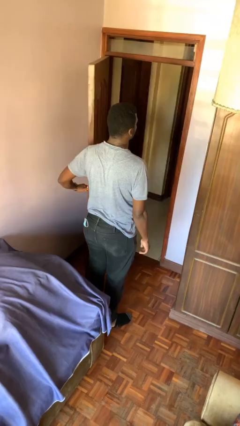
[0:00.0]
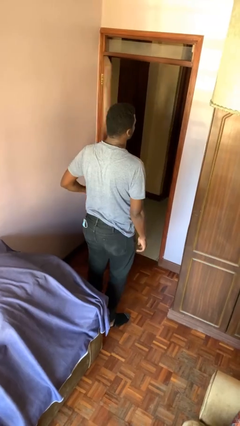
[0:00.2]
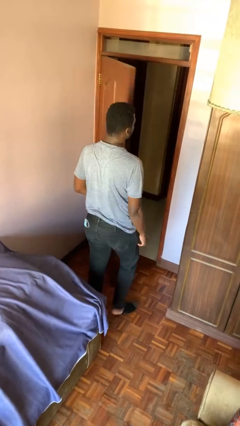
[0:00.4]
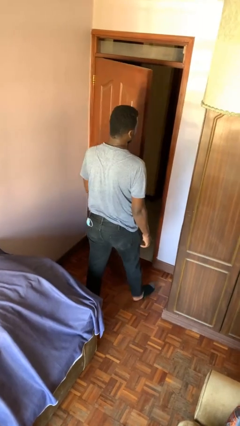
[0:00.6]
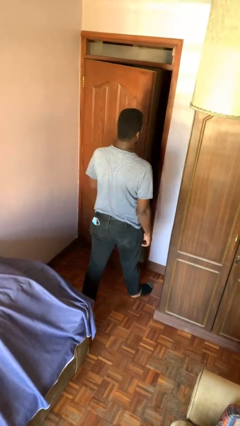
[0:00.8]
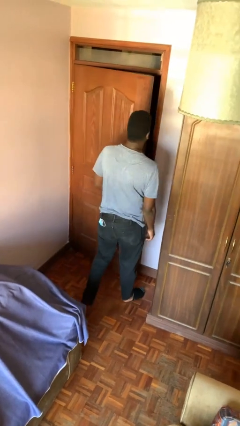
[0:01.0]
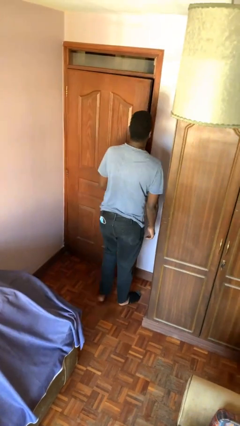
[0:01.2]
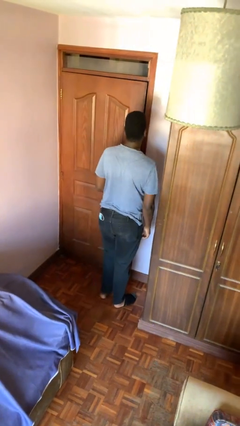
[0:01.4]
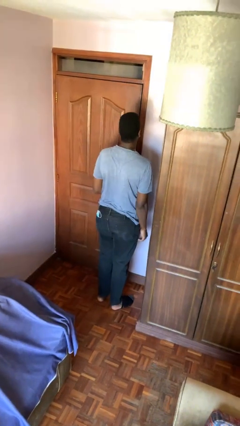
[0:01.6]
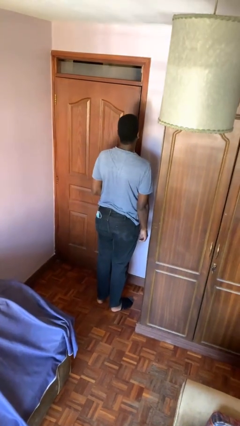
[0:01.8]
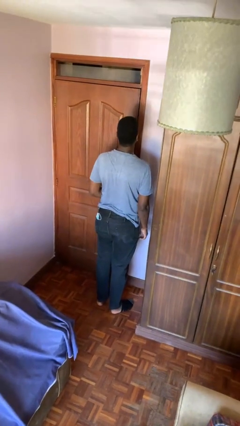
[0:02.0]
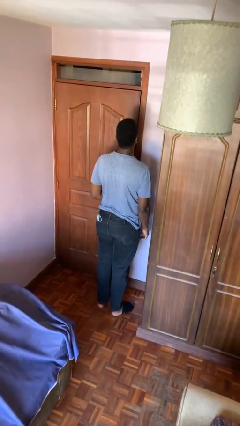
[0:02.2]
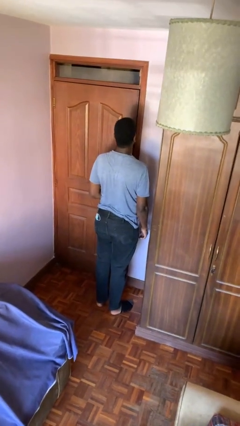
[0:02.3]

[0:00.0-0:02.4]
person closes facility door

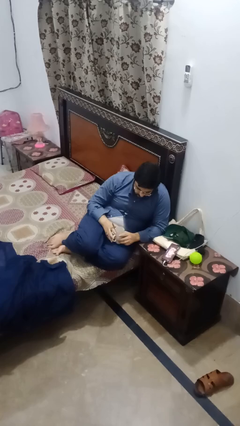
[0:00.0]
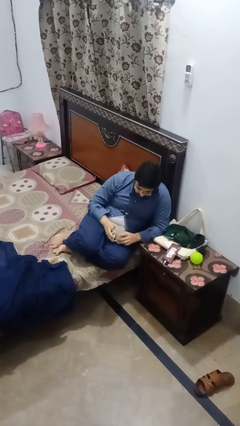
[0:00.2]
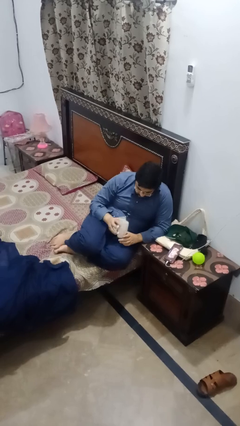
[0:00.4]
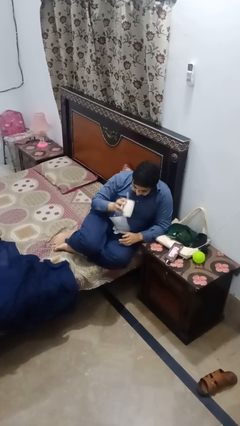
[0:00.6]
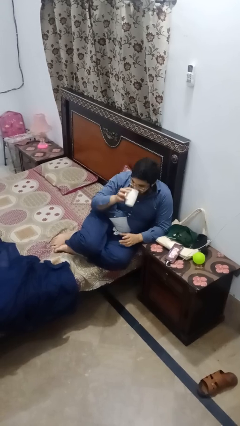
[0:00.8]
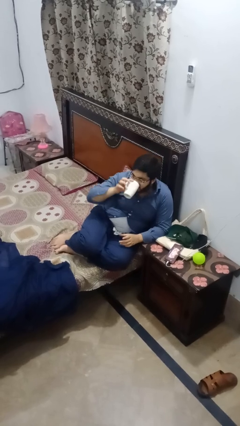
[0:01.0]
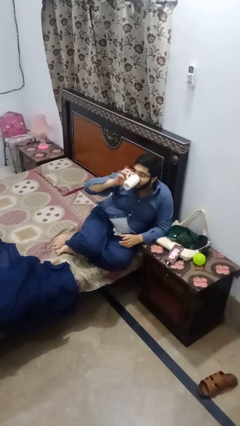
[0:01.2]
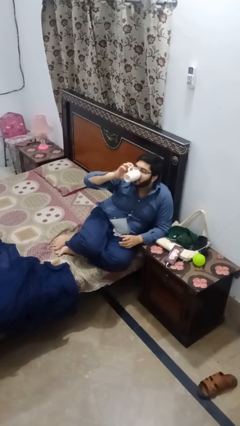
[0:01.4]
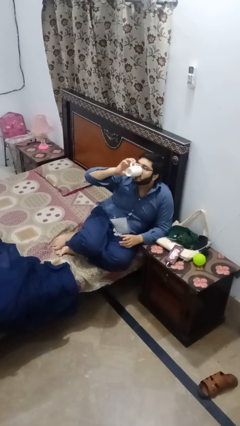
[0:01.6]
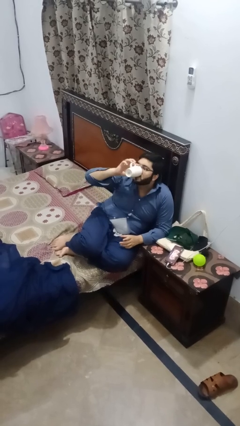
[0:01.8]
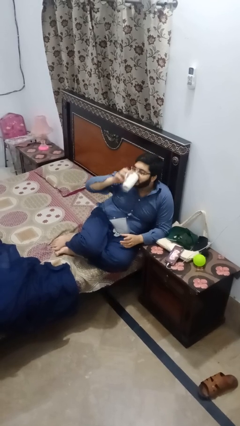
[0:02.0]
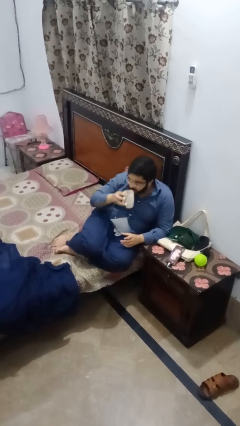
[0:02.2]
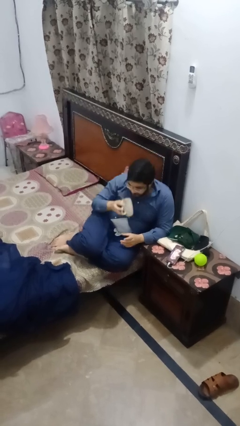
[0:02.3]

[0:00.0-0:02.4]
person drinks from mug

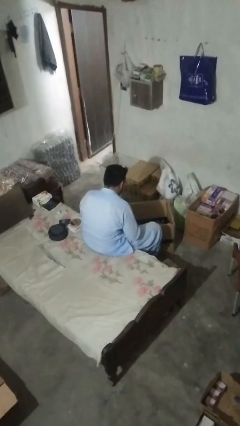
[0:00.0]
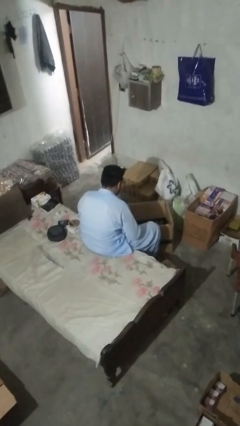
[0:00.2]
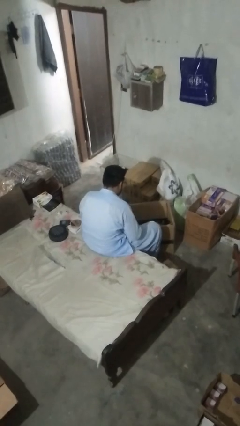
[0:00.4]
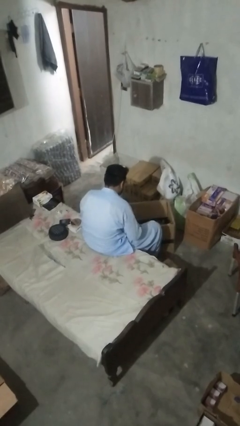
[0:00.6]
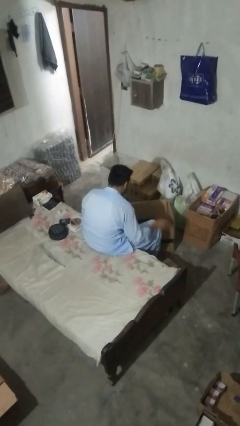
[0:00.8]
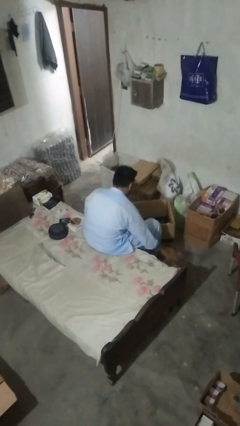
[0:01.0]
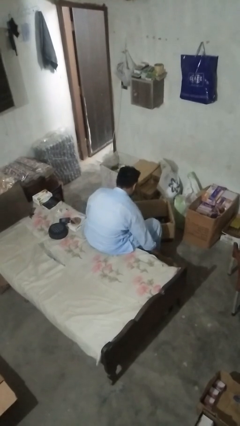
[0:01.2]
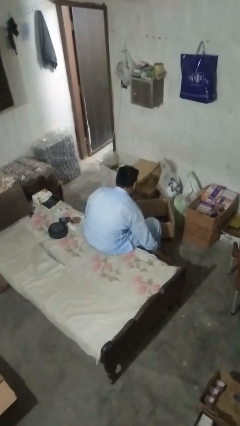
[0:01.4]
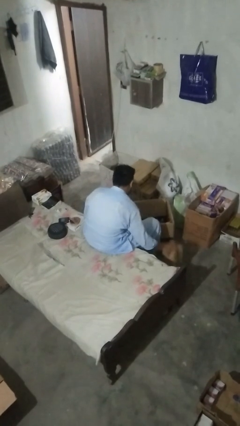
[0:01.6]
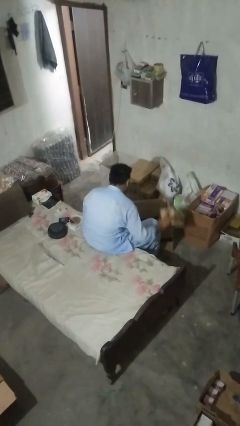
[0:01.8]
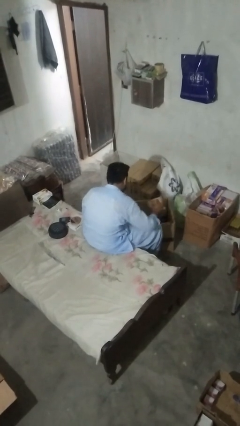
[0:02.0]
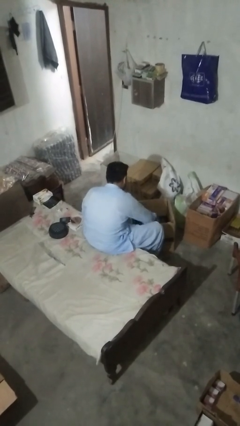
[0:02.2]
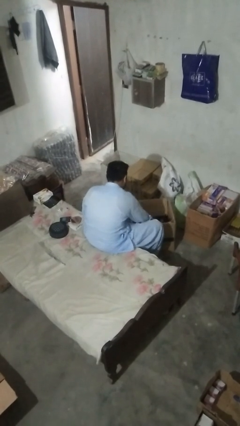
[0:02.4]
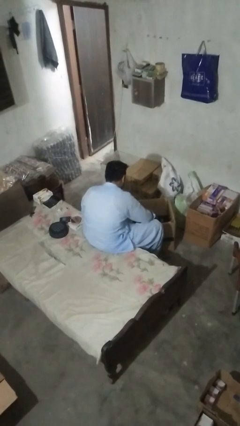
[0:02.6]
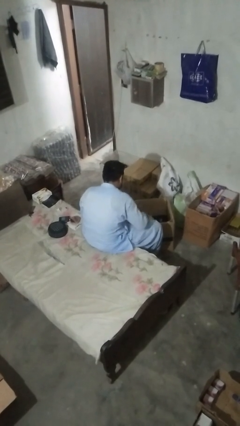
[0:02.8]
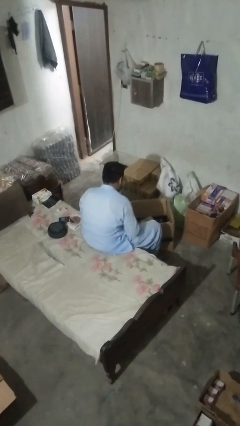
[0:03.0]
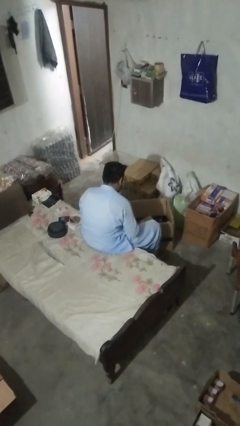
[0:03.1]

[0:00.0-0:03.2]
person puts object into box

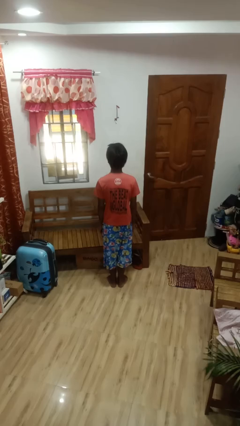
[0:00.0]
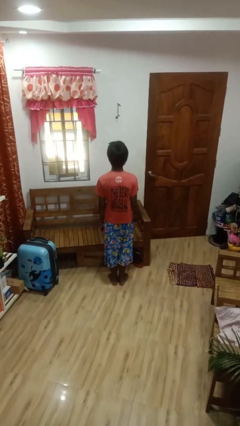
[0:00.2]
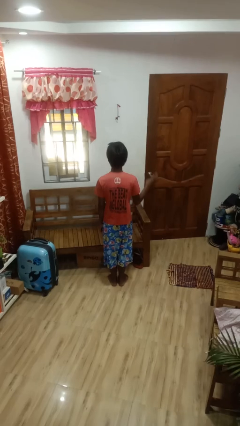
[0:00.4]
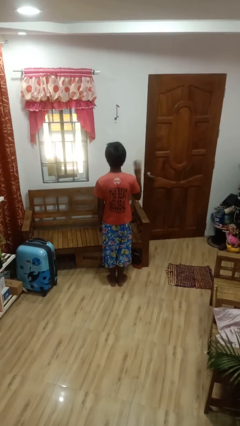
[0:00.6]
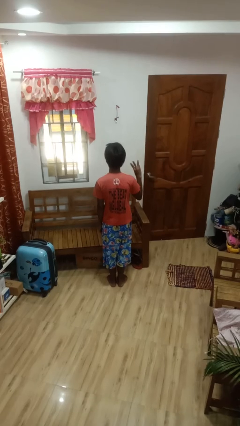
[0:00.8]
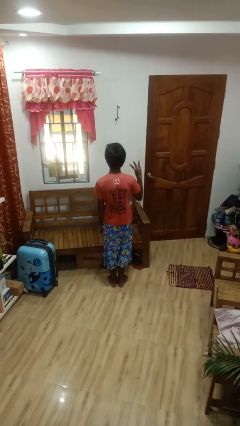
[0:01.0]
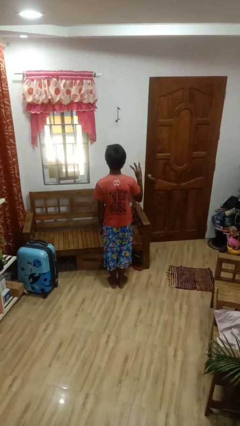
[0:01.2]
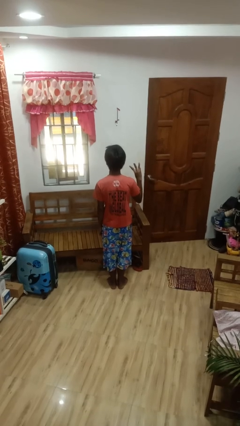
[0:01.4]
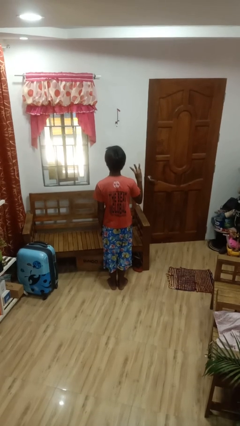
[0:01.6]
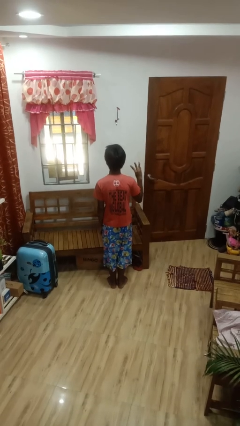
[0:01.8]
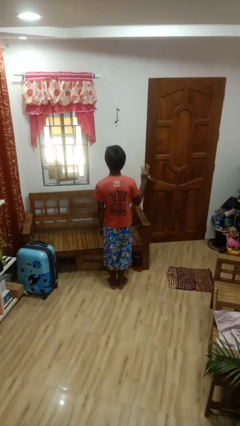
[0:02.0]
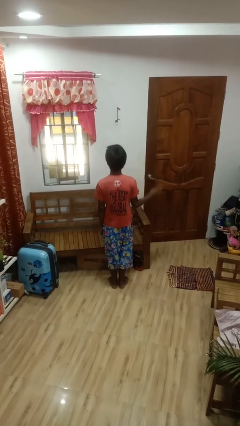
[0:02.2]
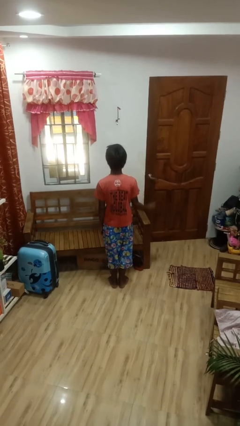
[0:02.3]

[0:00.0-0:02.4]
person gestures number three

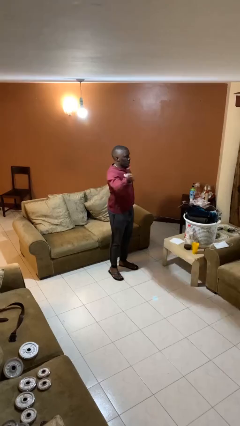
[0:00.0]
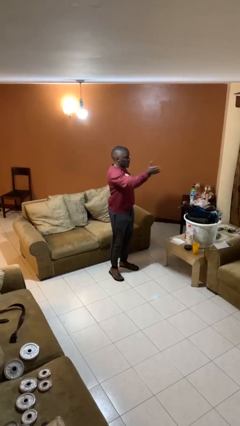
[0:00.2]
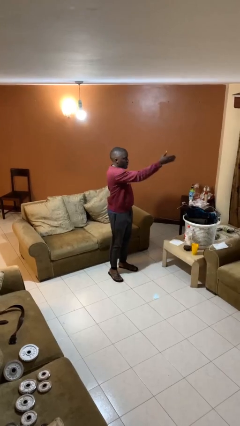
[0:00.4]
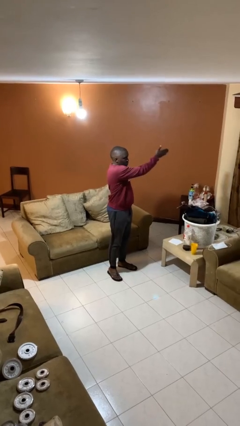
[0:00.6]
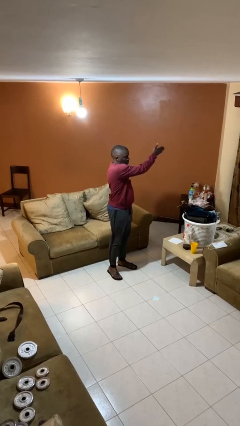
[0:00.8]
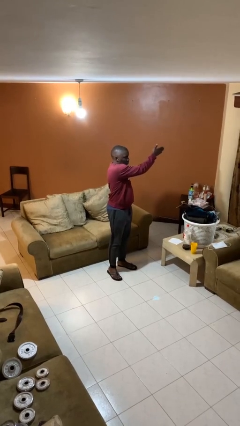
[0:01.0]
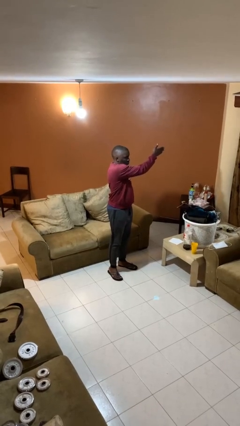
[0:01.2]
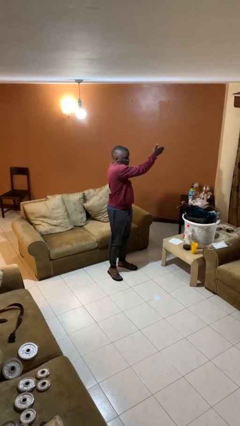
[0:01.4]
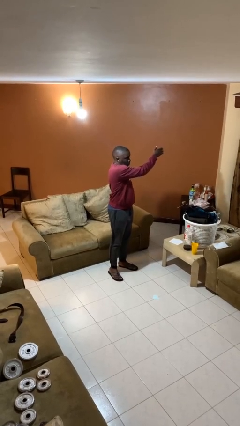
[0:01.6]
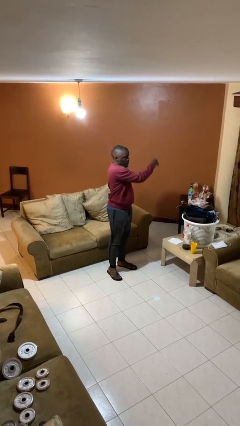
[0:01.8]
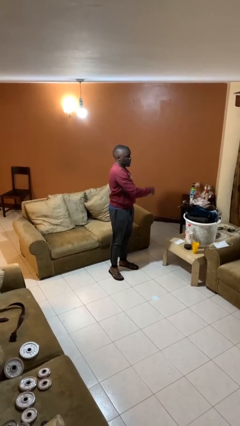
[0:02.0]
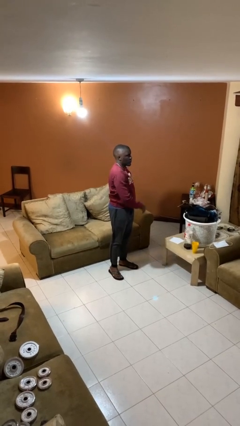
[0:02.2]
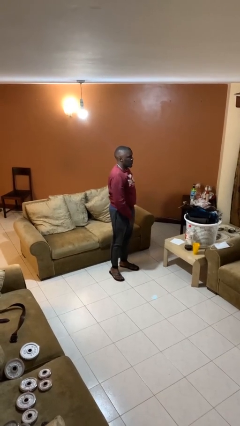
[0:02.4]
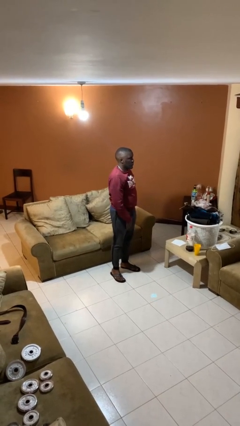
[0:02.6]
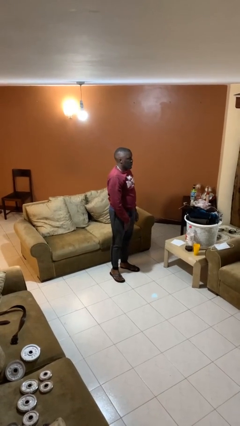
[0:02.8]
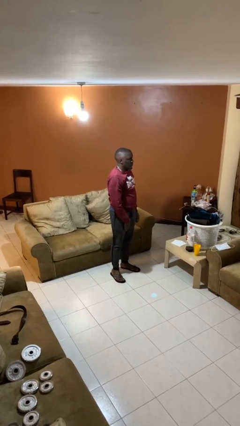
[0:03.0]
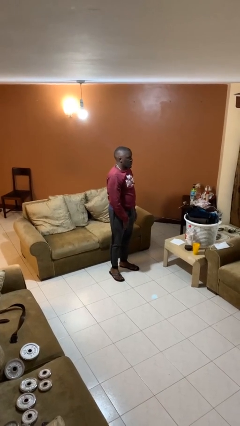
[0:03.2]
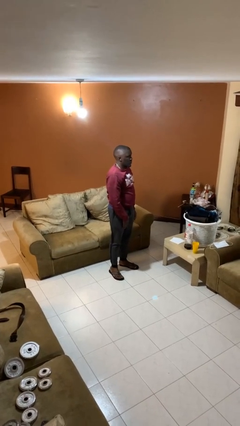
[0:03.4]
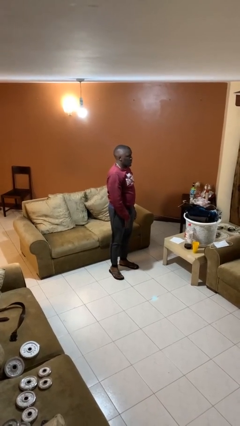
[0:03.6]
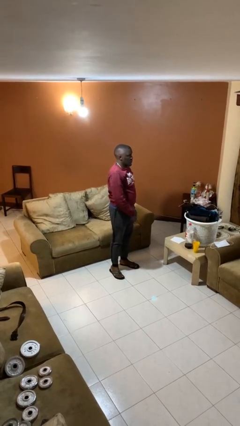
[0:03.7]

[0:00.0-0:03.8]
person gestures swipe left

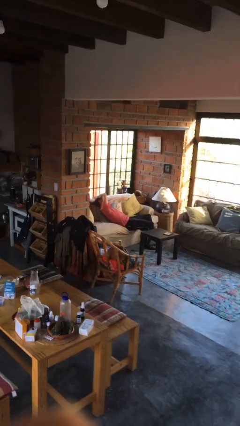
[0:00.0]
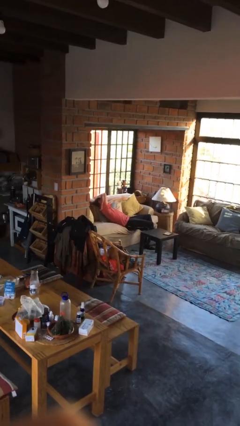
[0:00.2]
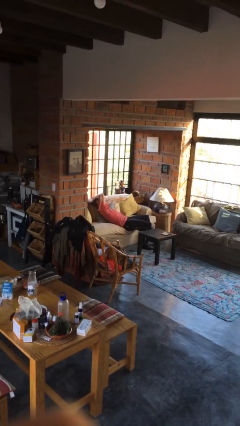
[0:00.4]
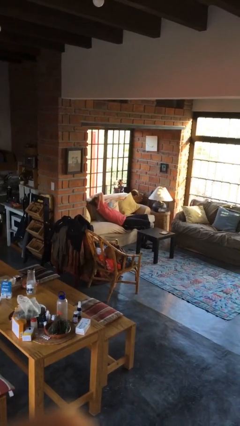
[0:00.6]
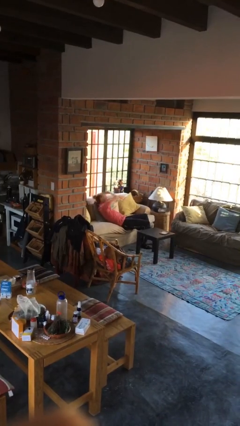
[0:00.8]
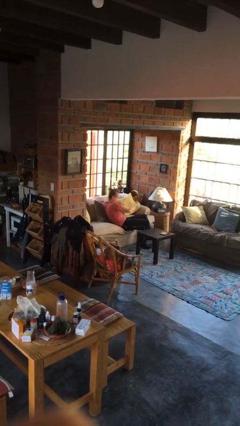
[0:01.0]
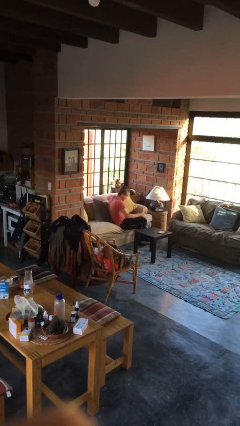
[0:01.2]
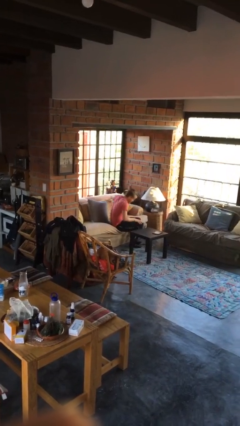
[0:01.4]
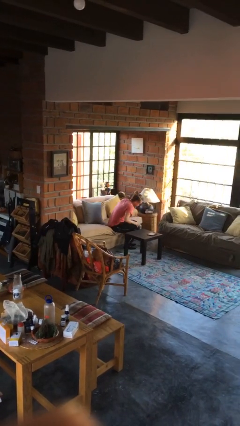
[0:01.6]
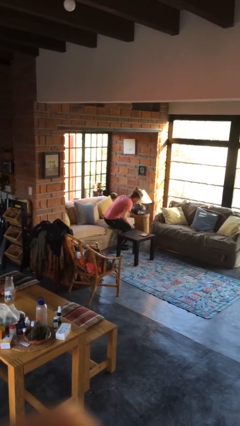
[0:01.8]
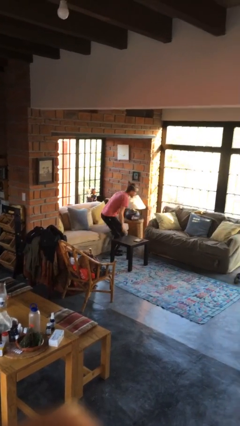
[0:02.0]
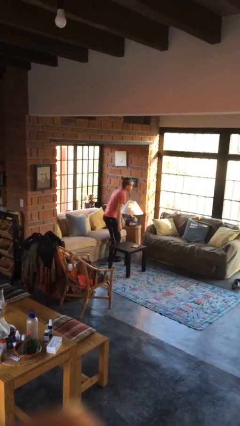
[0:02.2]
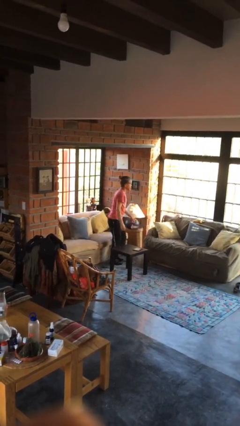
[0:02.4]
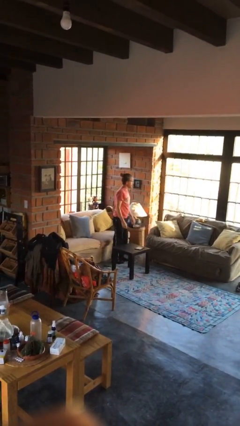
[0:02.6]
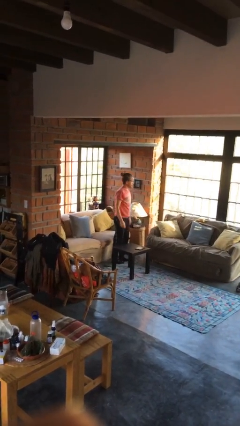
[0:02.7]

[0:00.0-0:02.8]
person stands up

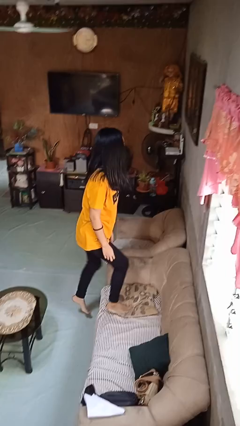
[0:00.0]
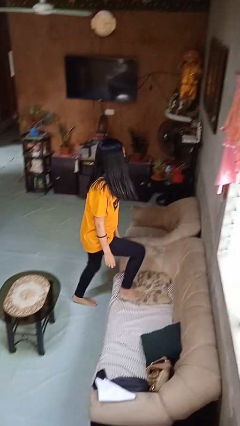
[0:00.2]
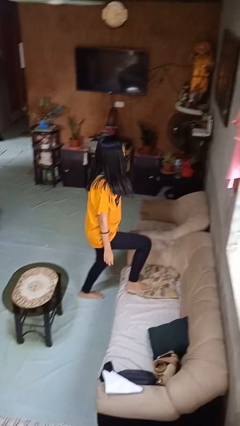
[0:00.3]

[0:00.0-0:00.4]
person climbs off couch
